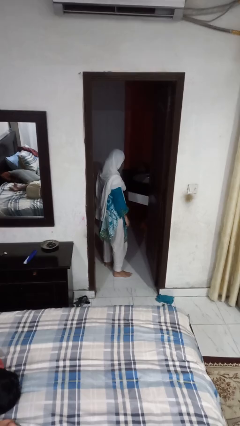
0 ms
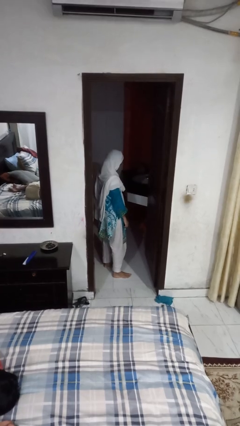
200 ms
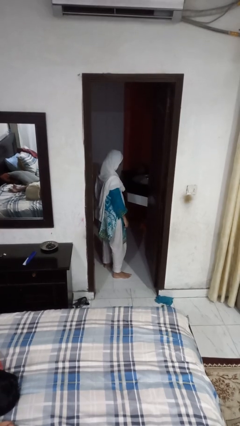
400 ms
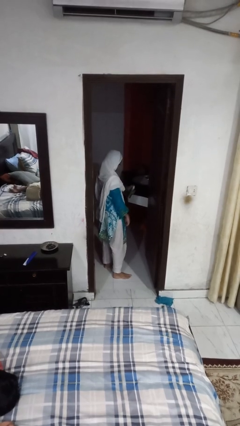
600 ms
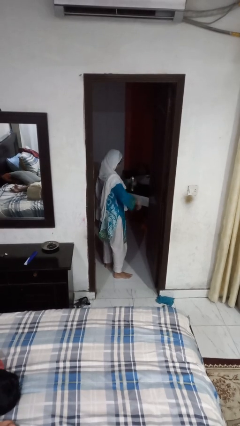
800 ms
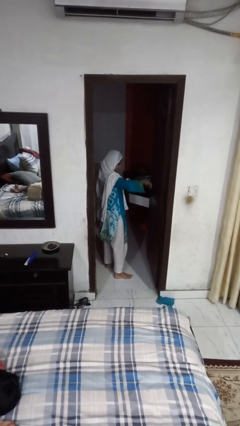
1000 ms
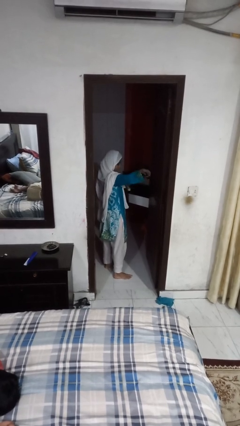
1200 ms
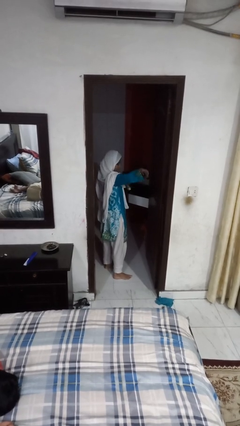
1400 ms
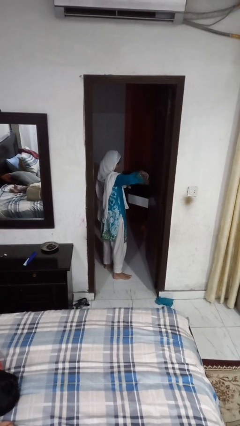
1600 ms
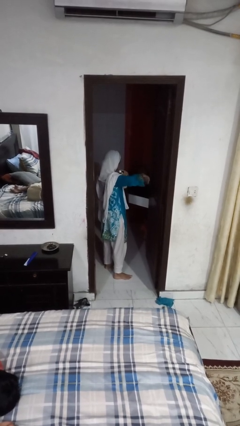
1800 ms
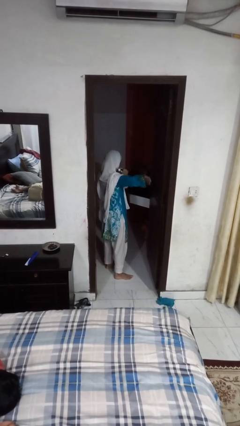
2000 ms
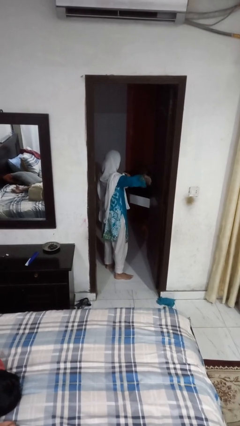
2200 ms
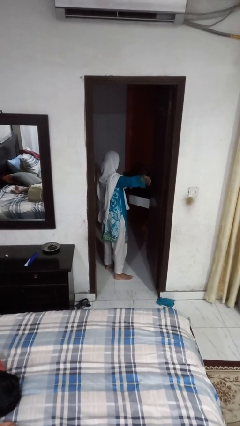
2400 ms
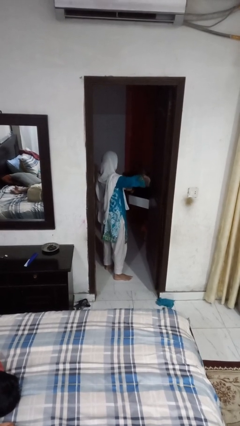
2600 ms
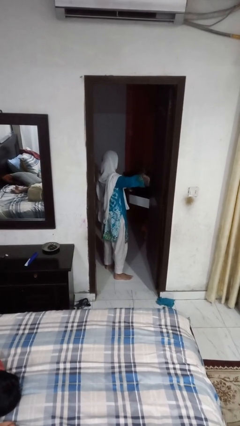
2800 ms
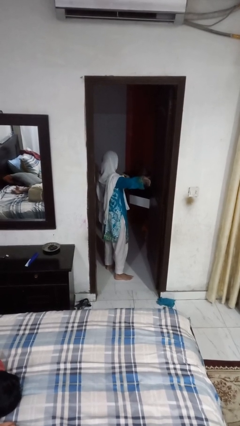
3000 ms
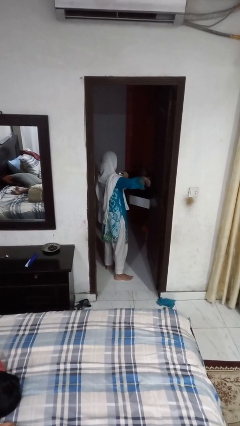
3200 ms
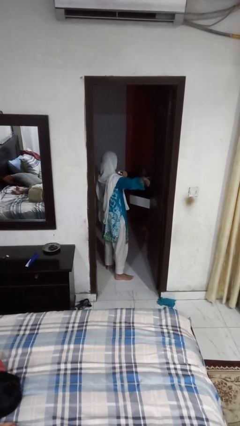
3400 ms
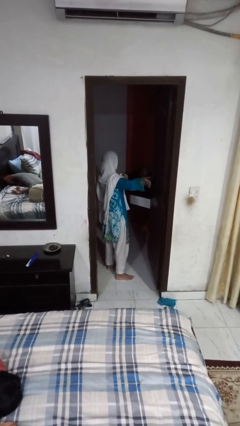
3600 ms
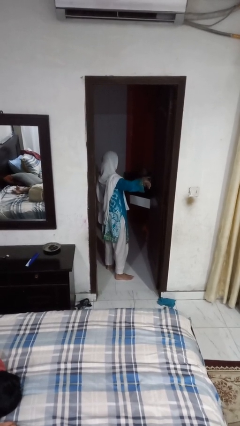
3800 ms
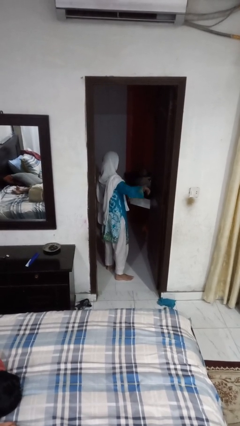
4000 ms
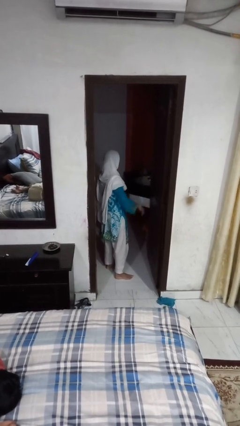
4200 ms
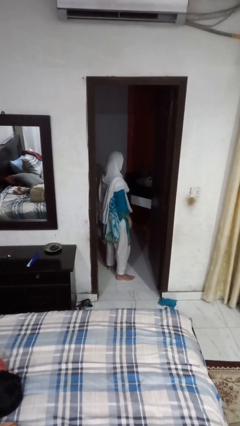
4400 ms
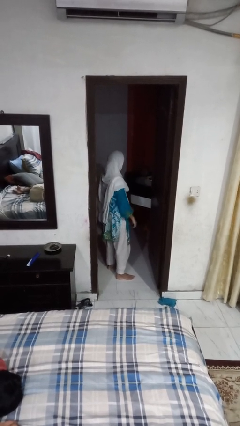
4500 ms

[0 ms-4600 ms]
person applies deodorant

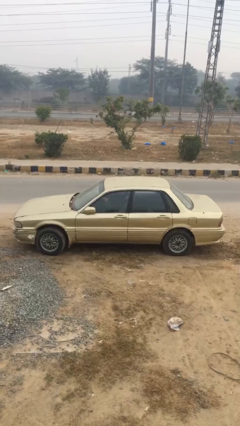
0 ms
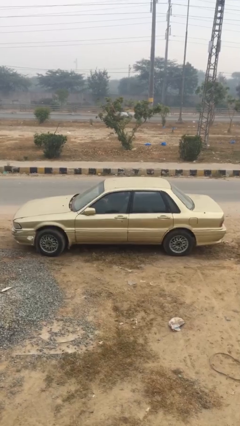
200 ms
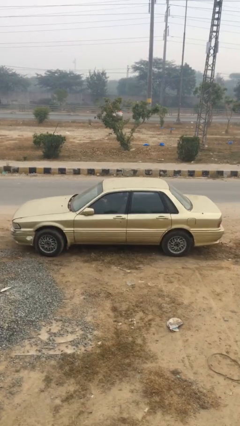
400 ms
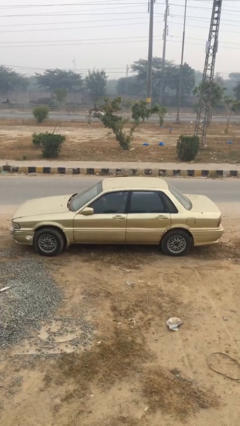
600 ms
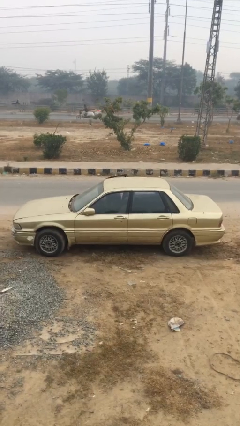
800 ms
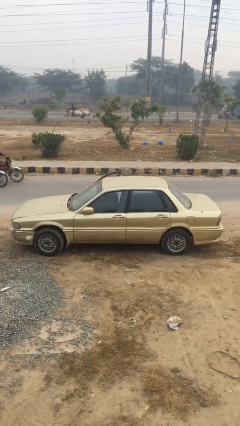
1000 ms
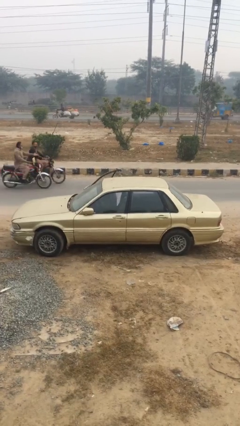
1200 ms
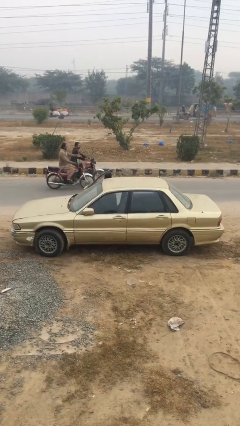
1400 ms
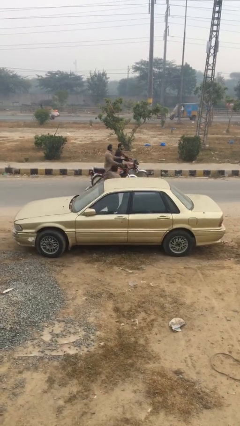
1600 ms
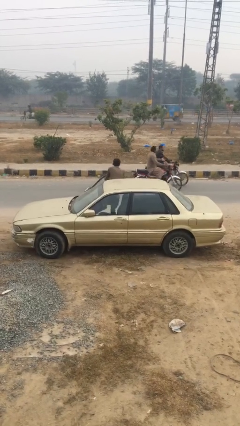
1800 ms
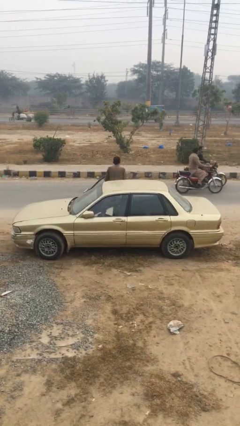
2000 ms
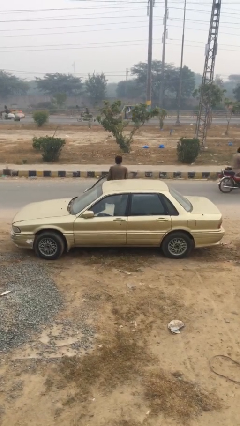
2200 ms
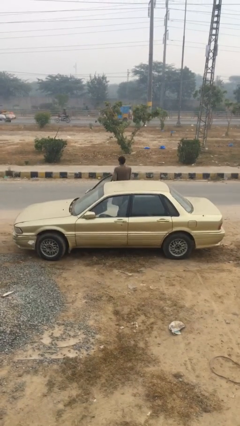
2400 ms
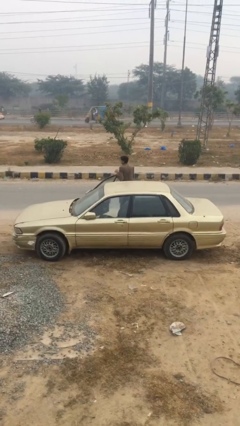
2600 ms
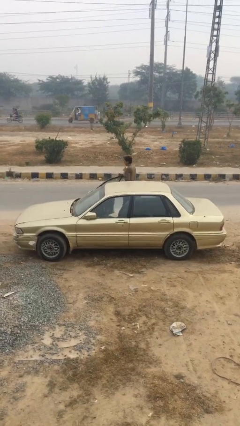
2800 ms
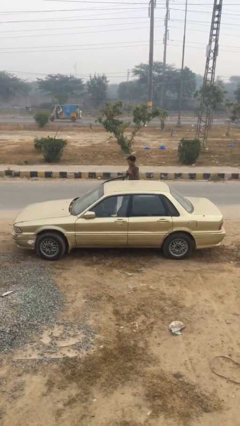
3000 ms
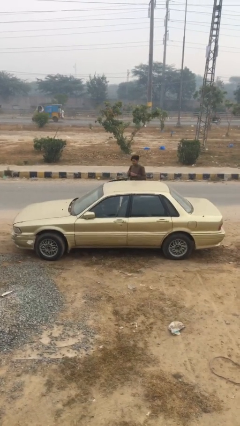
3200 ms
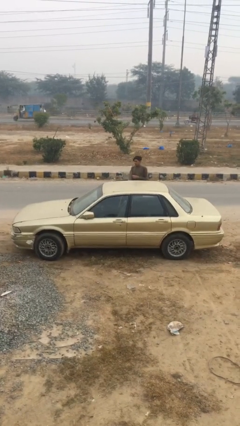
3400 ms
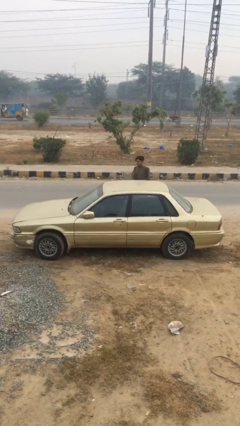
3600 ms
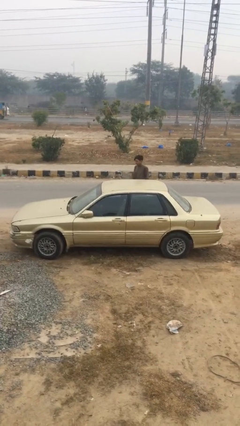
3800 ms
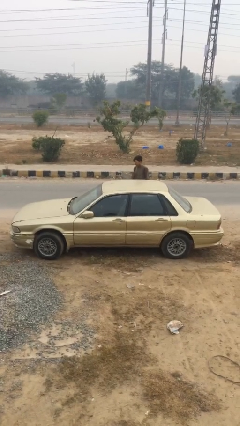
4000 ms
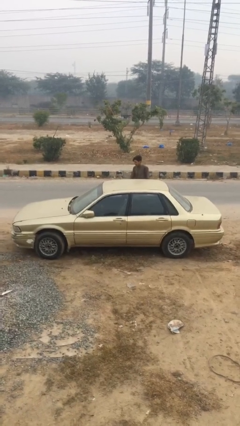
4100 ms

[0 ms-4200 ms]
car drops off person

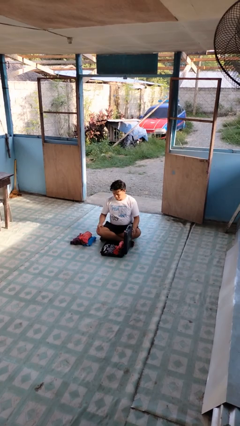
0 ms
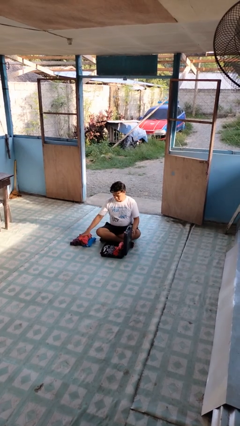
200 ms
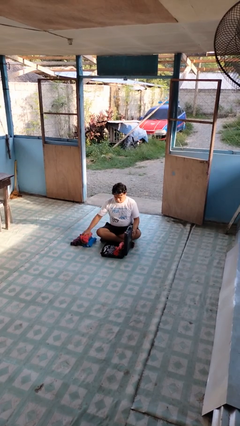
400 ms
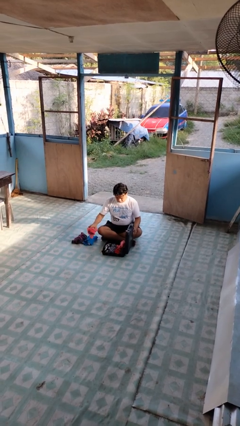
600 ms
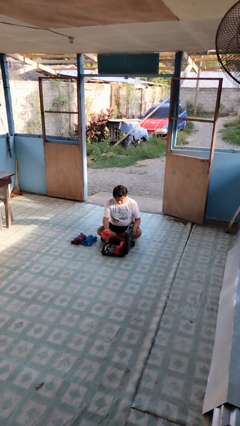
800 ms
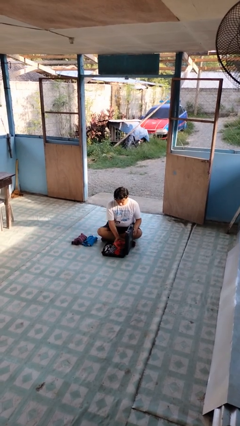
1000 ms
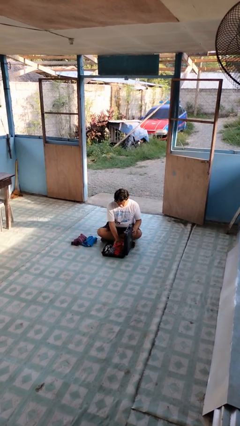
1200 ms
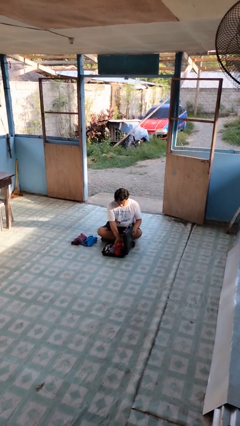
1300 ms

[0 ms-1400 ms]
person loads clothes into suitcase

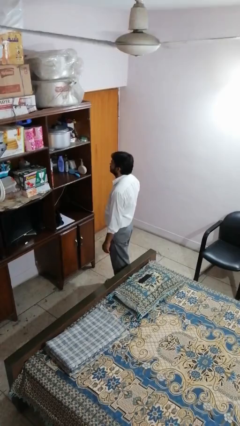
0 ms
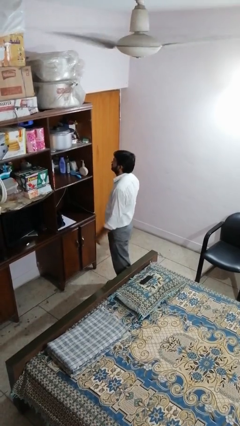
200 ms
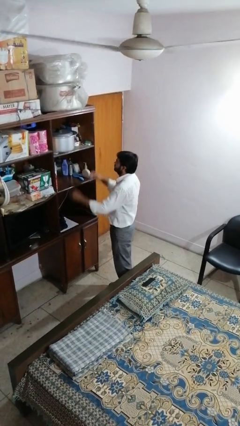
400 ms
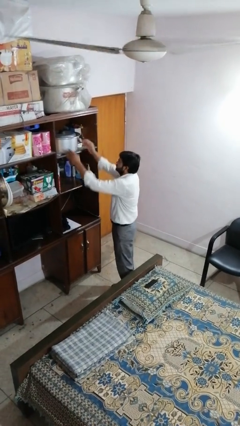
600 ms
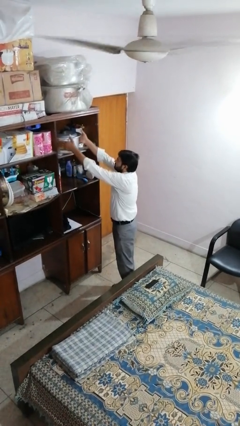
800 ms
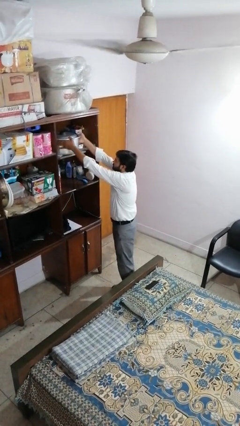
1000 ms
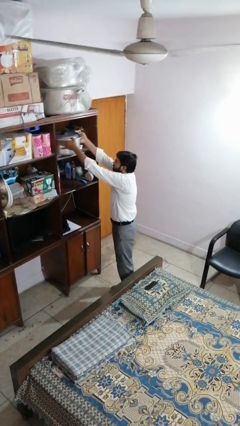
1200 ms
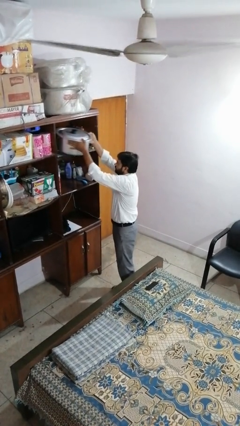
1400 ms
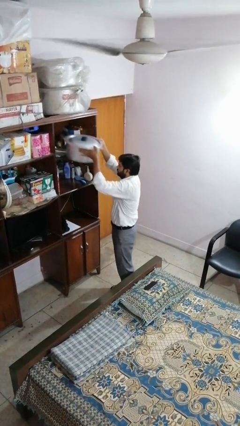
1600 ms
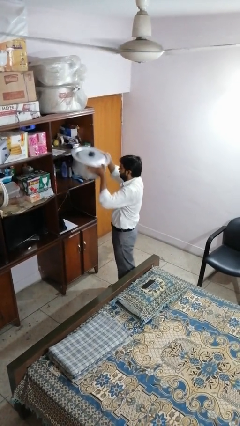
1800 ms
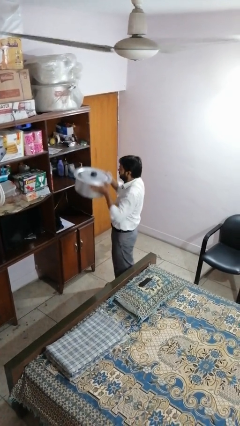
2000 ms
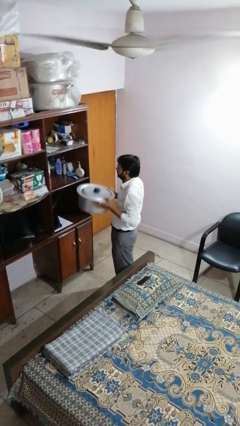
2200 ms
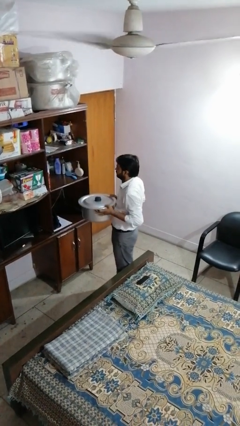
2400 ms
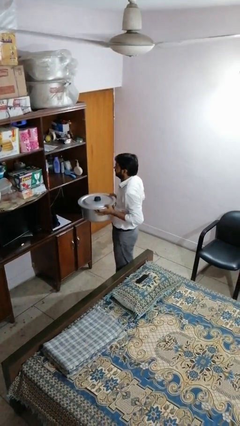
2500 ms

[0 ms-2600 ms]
person picks up object from shelf

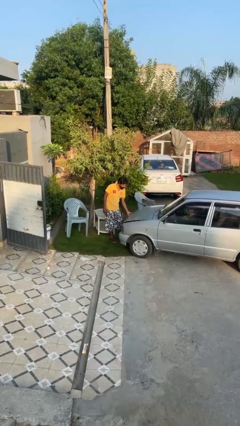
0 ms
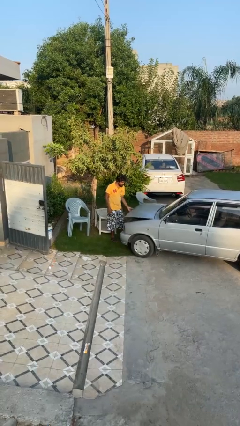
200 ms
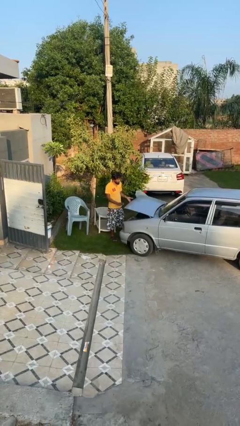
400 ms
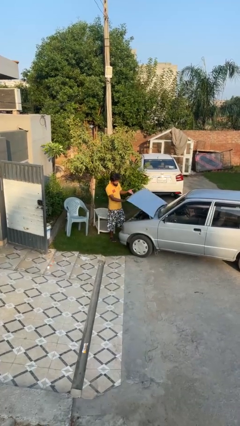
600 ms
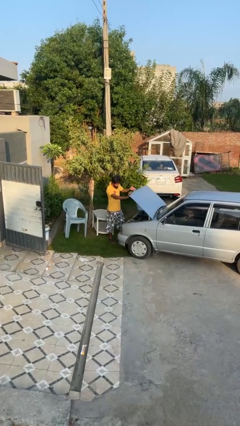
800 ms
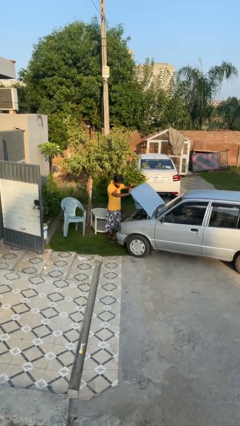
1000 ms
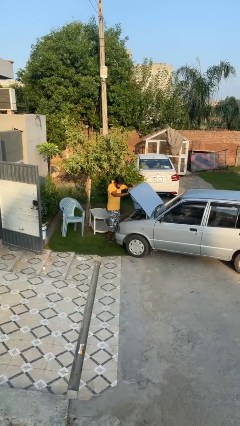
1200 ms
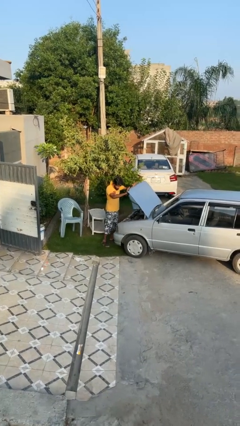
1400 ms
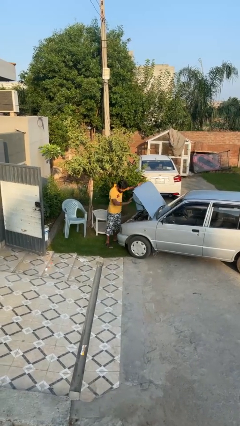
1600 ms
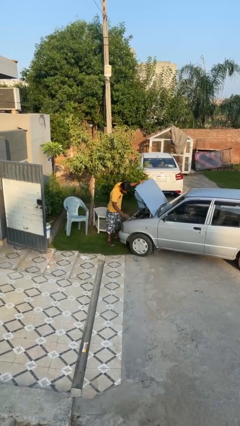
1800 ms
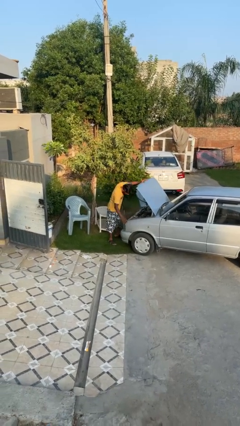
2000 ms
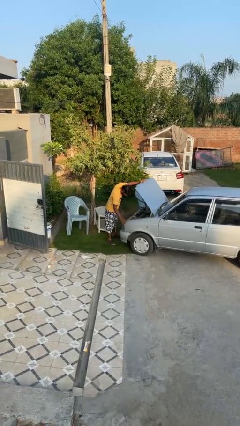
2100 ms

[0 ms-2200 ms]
person opens car hood

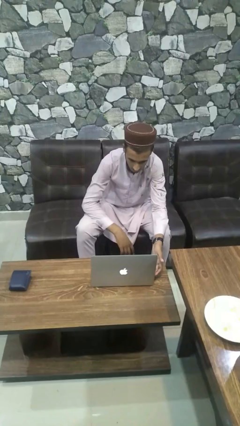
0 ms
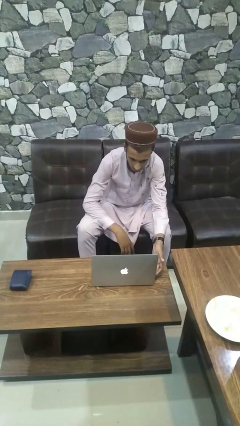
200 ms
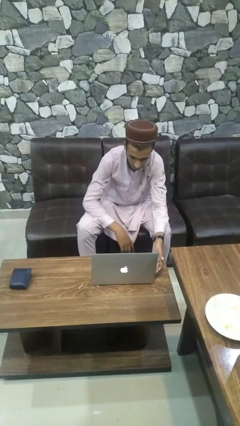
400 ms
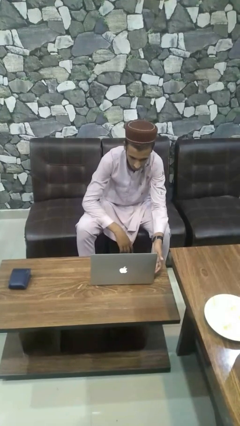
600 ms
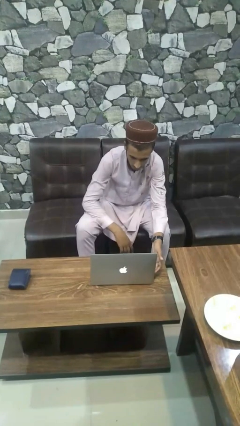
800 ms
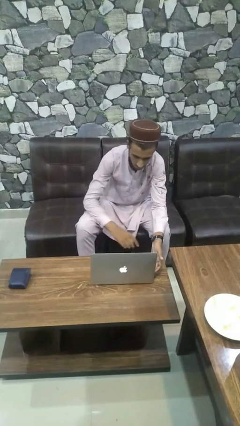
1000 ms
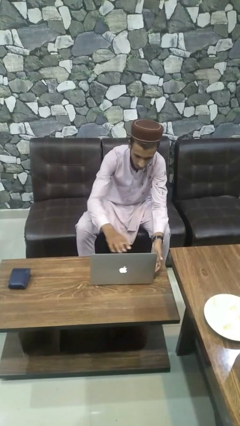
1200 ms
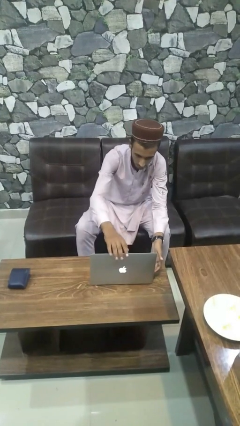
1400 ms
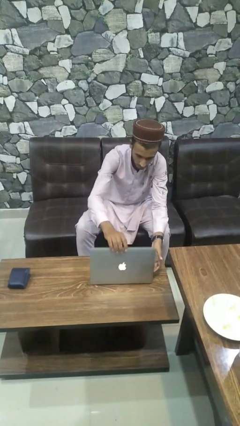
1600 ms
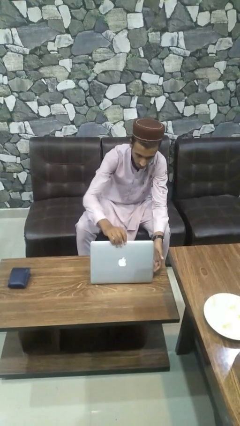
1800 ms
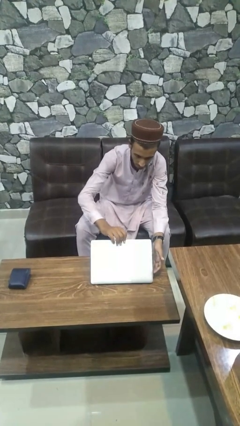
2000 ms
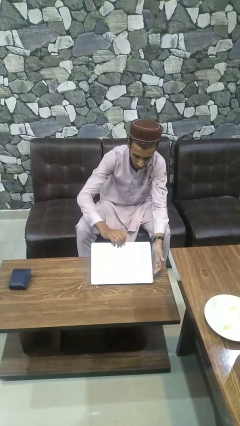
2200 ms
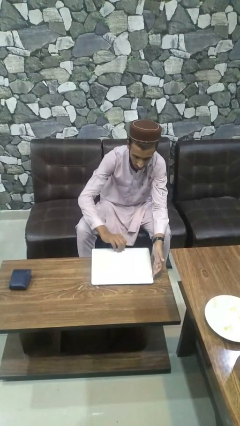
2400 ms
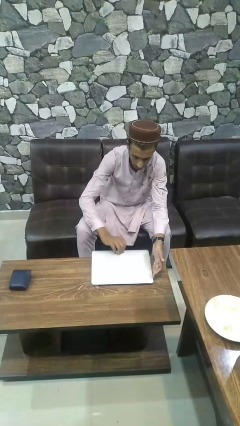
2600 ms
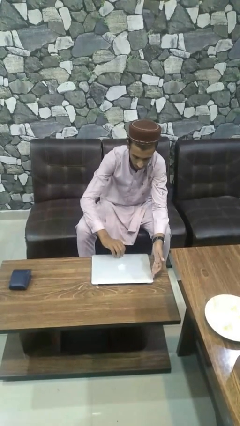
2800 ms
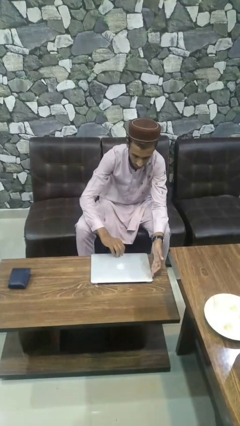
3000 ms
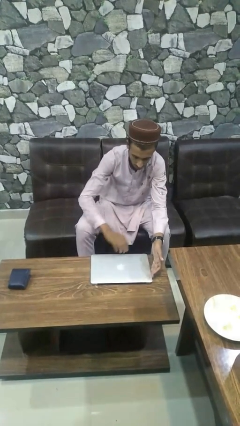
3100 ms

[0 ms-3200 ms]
person closes laptop
